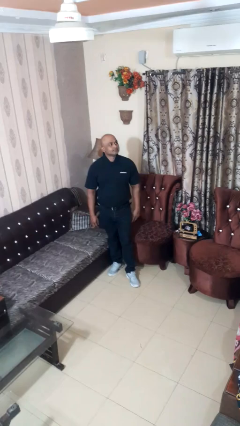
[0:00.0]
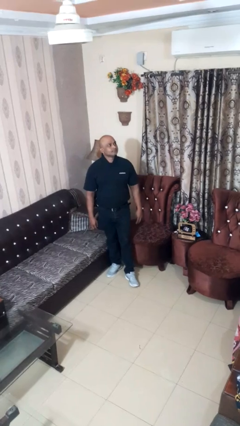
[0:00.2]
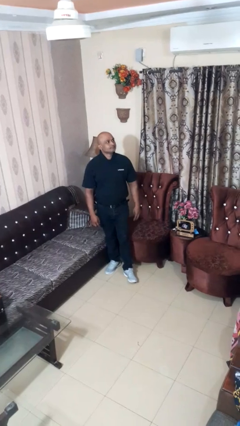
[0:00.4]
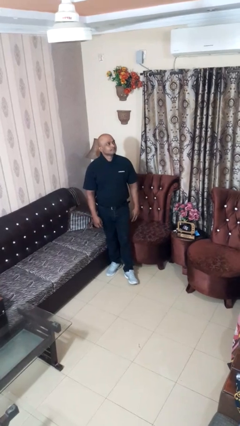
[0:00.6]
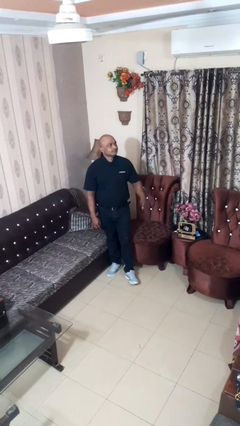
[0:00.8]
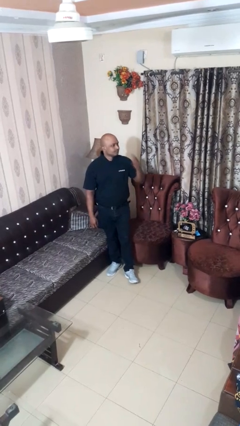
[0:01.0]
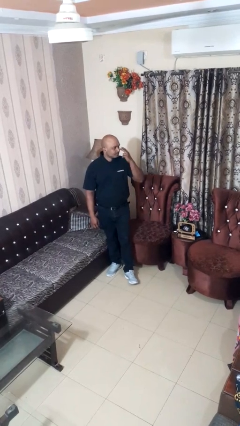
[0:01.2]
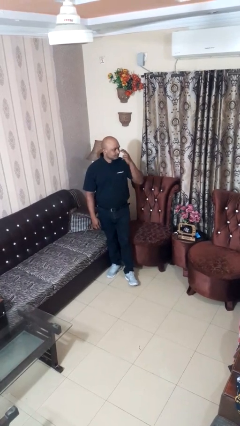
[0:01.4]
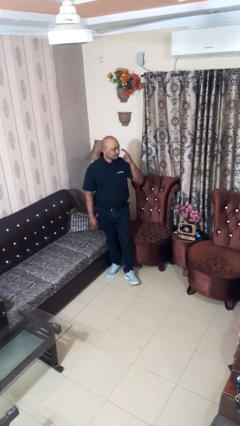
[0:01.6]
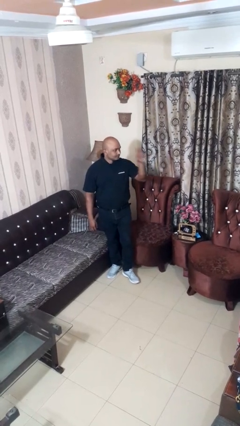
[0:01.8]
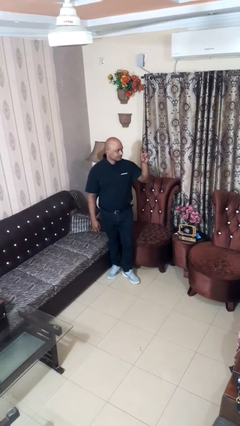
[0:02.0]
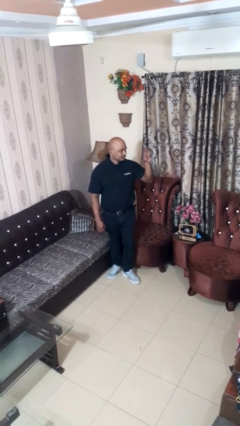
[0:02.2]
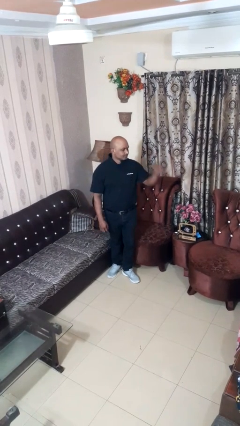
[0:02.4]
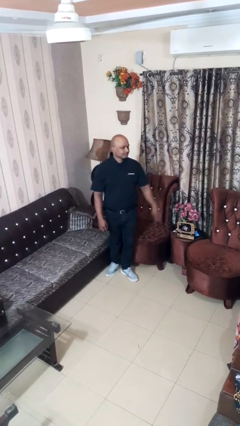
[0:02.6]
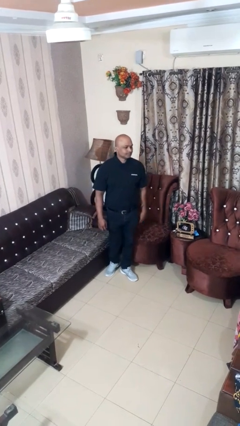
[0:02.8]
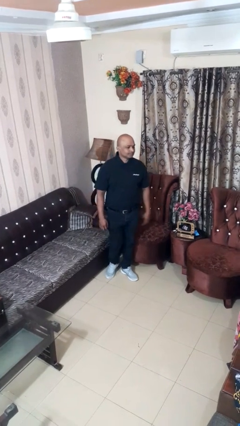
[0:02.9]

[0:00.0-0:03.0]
person gestures watch closely

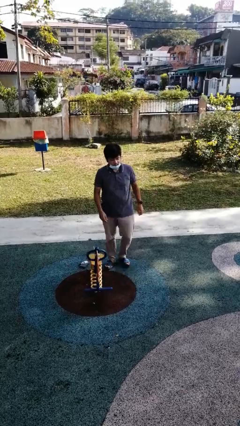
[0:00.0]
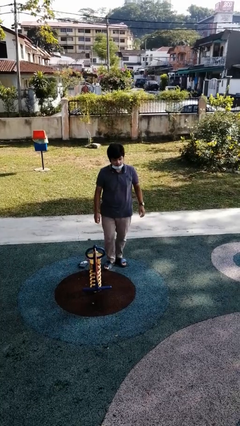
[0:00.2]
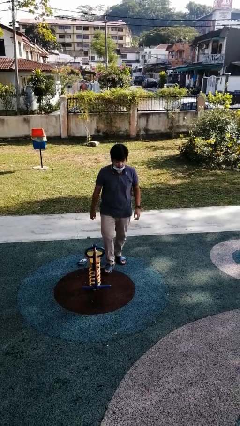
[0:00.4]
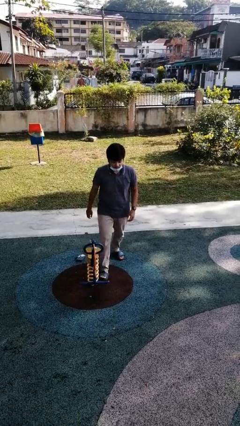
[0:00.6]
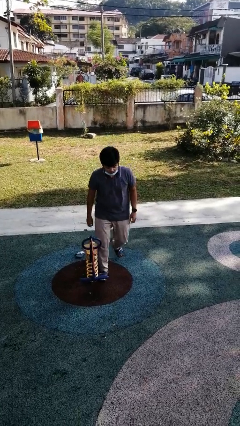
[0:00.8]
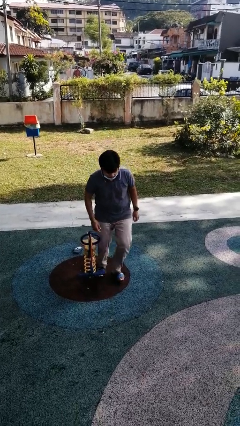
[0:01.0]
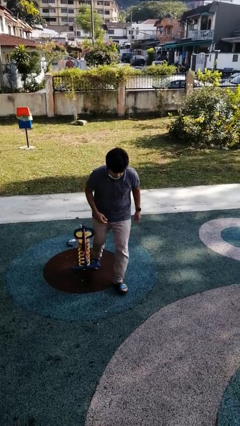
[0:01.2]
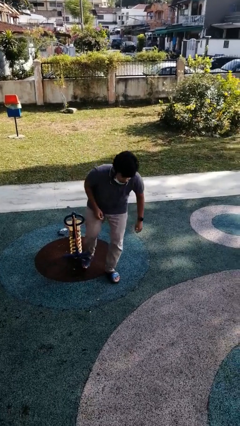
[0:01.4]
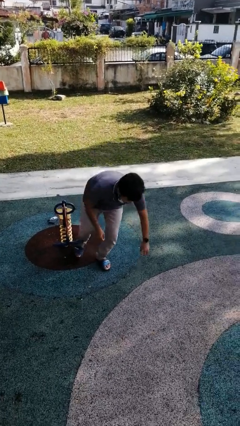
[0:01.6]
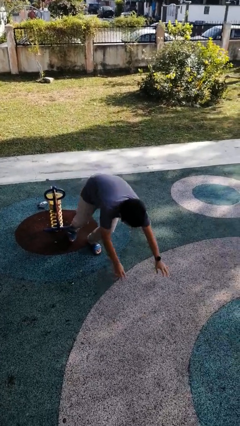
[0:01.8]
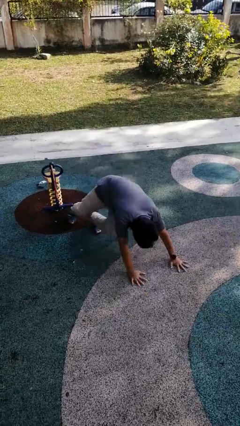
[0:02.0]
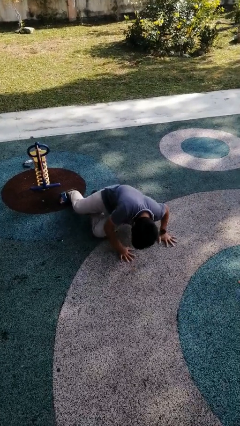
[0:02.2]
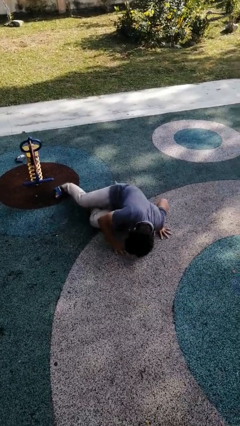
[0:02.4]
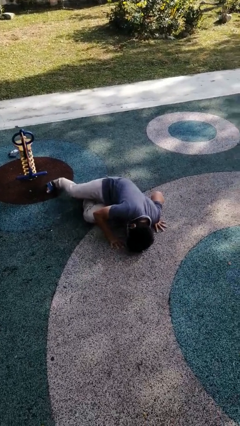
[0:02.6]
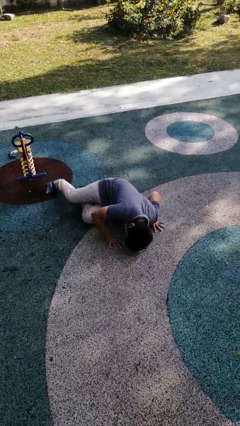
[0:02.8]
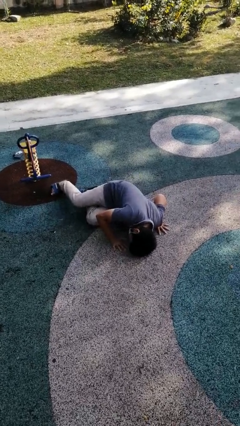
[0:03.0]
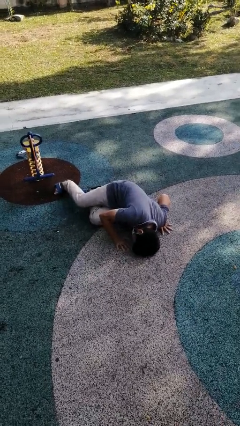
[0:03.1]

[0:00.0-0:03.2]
person trips on object on floor

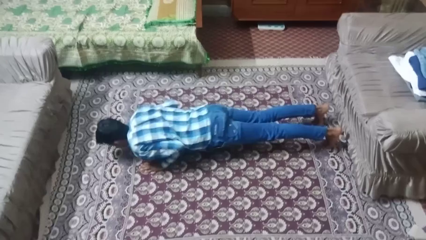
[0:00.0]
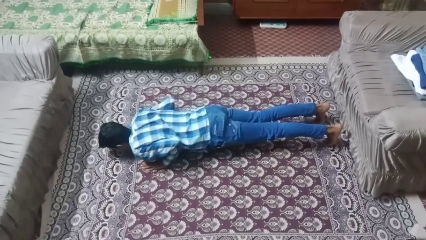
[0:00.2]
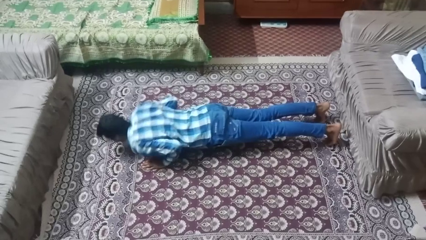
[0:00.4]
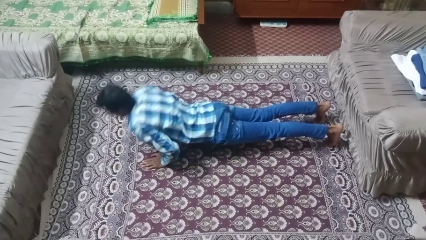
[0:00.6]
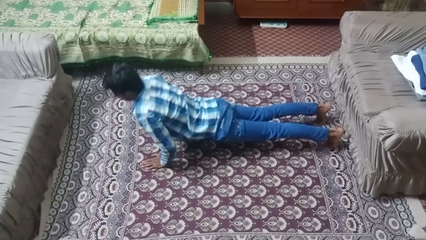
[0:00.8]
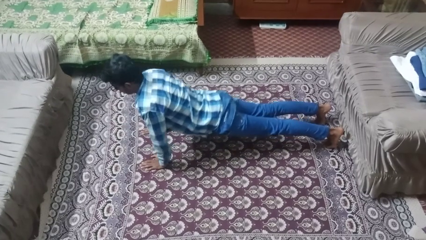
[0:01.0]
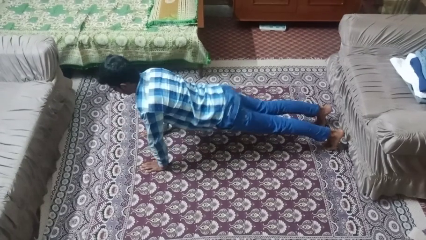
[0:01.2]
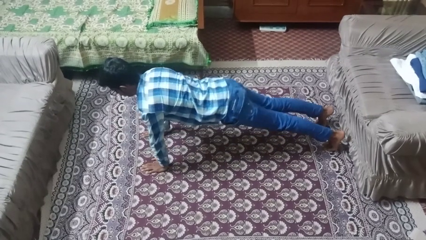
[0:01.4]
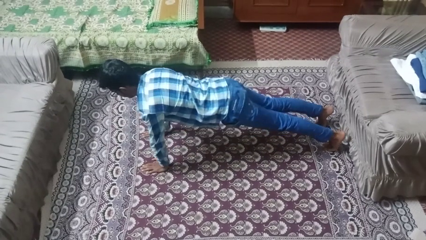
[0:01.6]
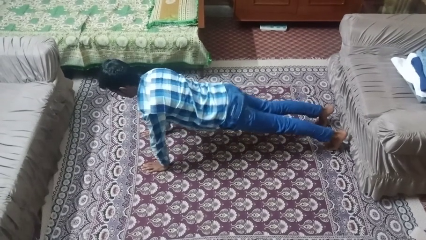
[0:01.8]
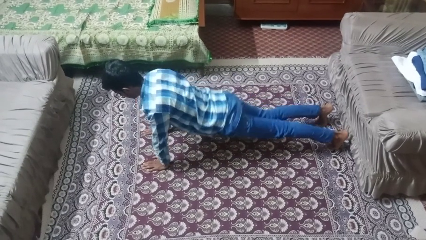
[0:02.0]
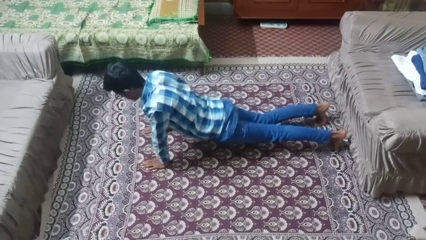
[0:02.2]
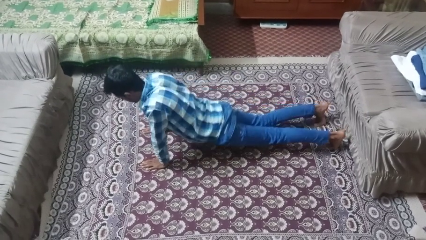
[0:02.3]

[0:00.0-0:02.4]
person exercises with pushup

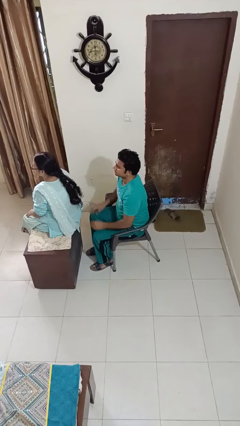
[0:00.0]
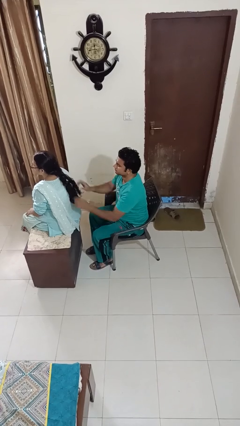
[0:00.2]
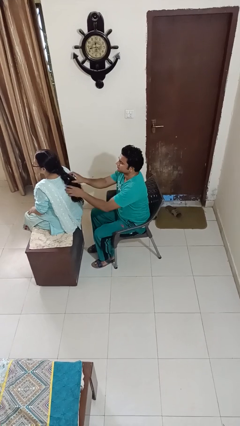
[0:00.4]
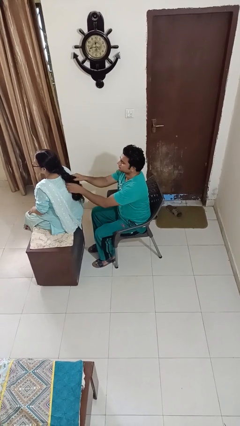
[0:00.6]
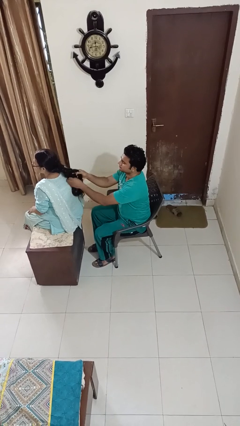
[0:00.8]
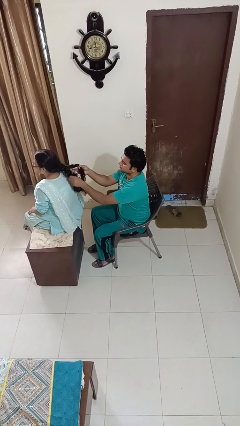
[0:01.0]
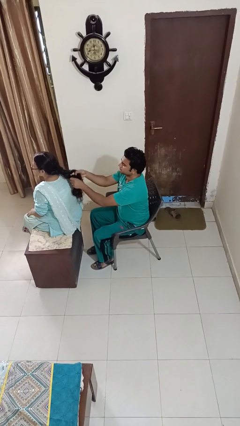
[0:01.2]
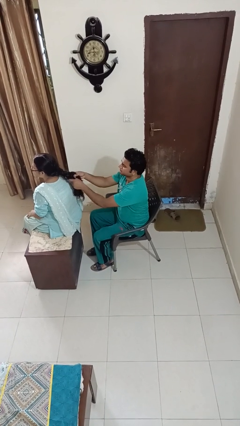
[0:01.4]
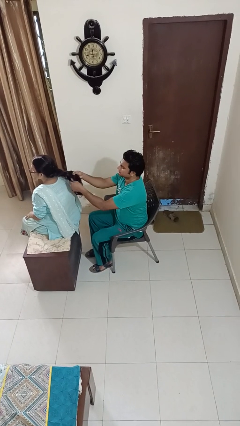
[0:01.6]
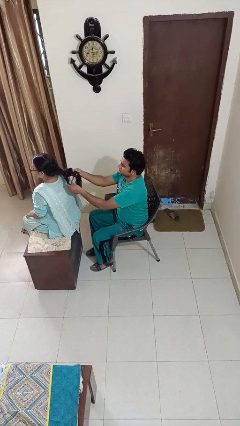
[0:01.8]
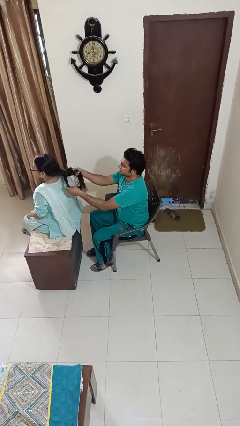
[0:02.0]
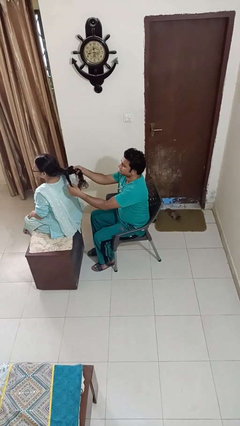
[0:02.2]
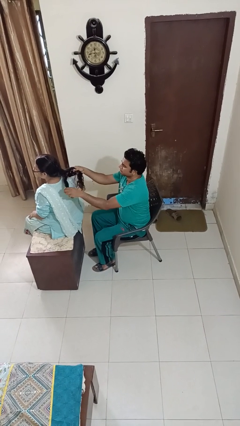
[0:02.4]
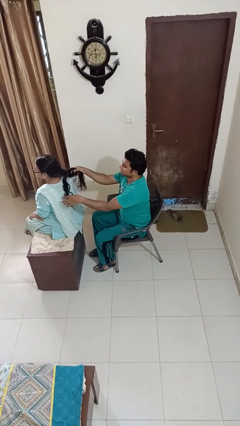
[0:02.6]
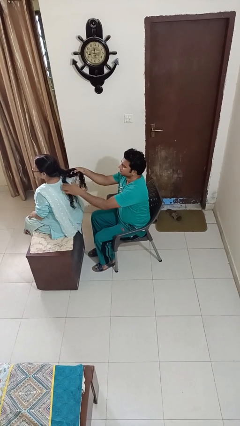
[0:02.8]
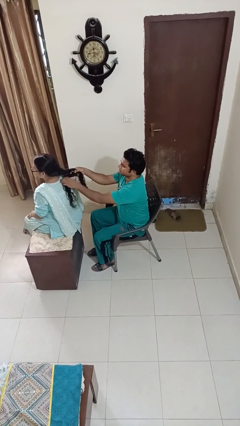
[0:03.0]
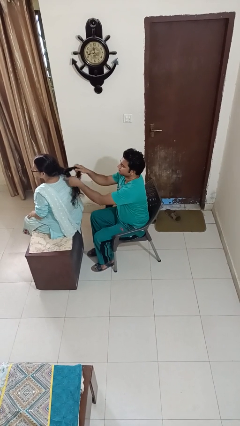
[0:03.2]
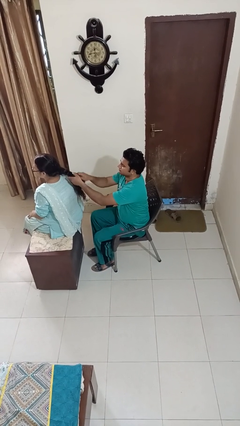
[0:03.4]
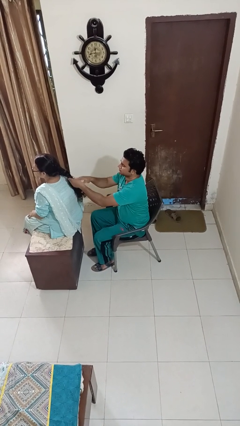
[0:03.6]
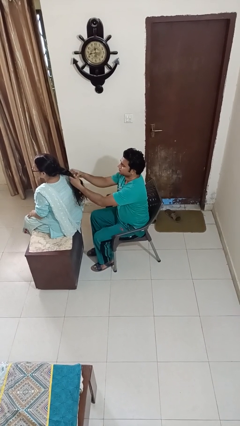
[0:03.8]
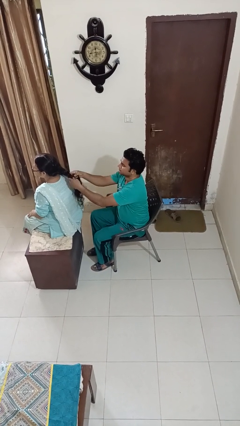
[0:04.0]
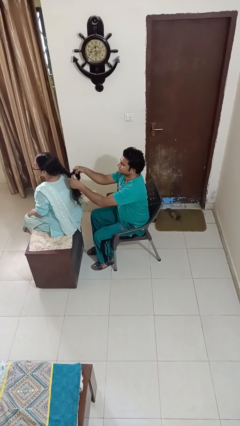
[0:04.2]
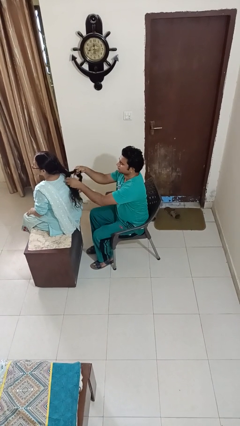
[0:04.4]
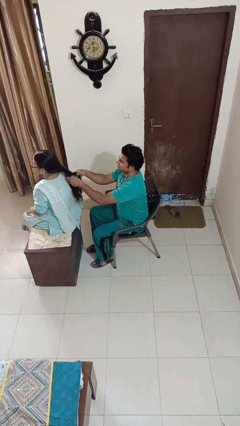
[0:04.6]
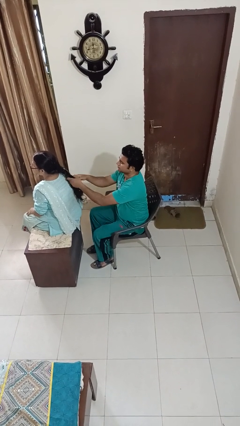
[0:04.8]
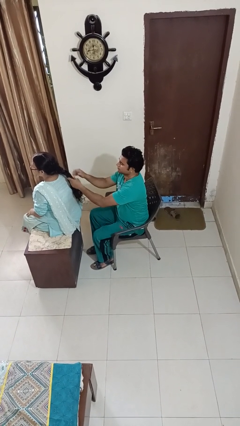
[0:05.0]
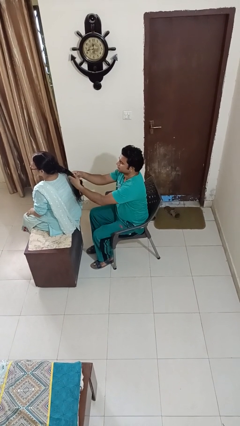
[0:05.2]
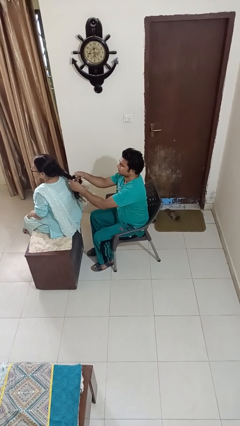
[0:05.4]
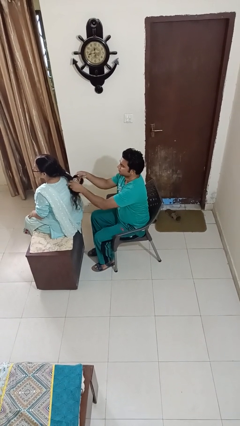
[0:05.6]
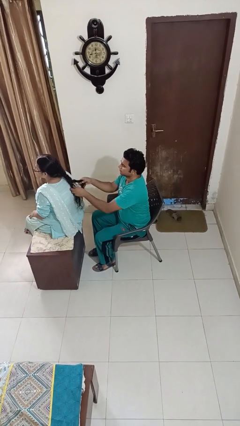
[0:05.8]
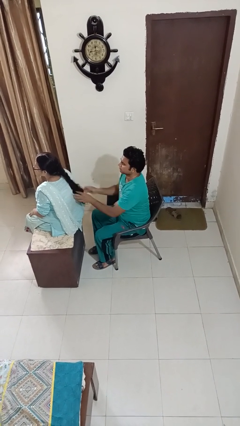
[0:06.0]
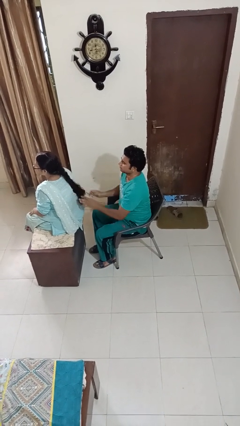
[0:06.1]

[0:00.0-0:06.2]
person braids hair of person

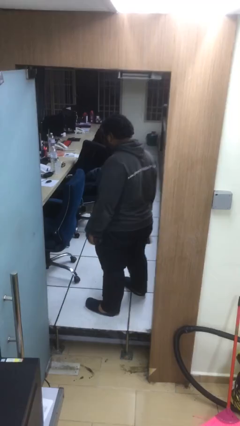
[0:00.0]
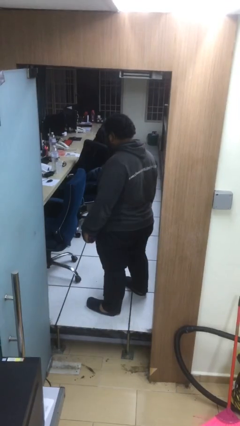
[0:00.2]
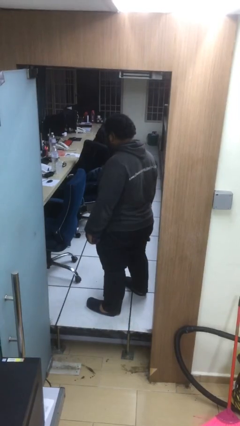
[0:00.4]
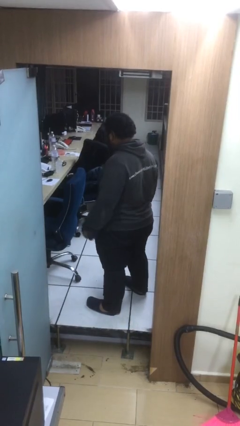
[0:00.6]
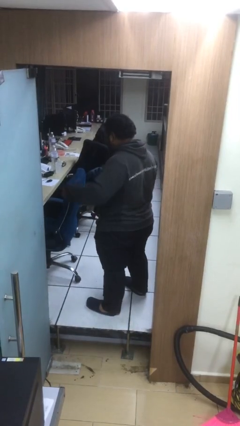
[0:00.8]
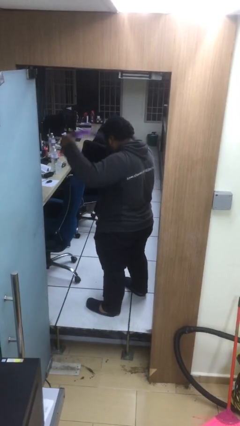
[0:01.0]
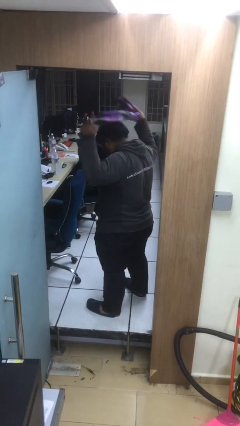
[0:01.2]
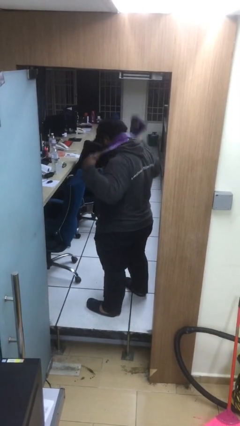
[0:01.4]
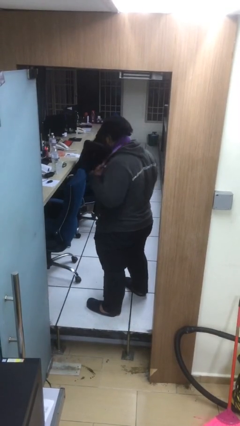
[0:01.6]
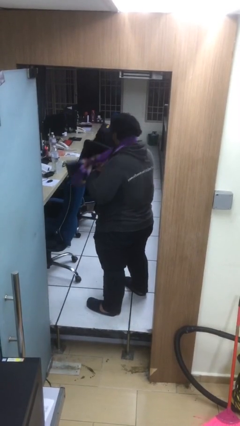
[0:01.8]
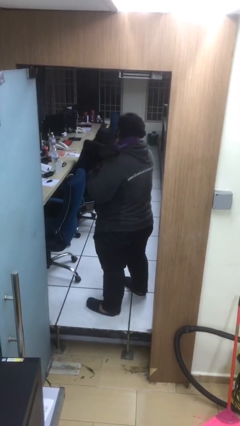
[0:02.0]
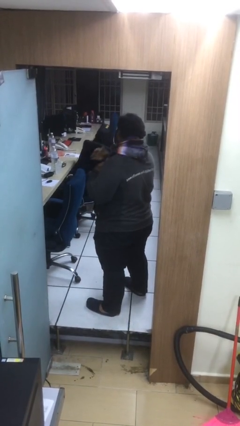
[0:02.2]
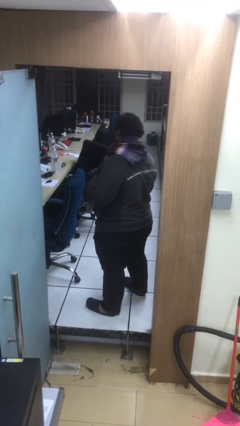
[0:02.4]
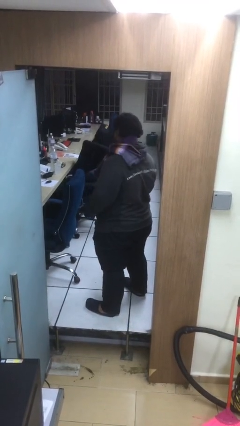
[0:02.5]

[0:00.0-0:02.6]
person puts on scarf

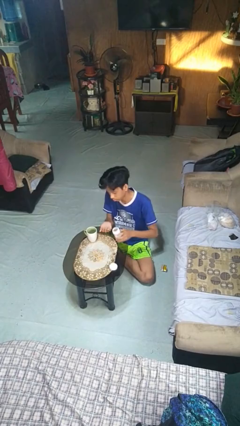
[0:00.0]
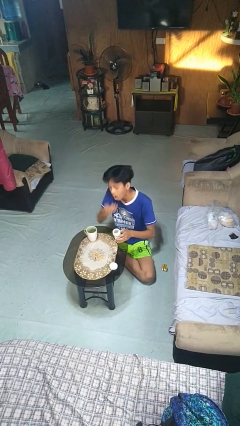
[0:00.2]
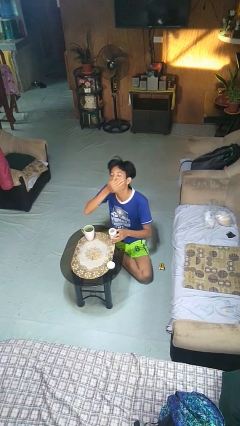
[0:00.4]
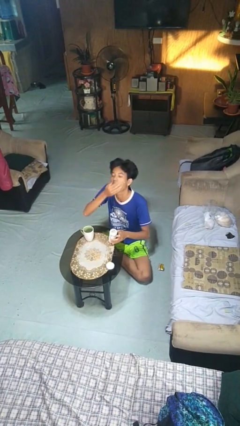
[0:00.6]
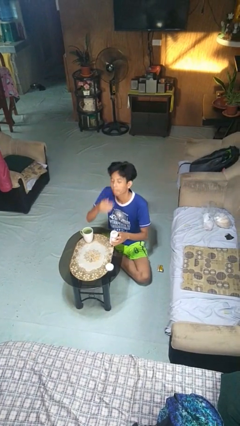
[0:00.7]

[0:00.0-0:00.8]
person takes medicine pills
